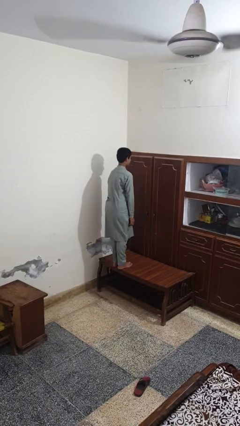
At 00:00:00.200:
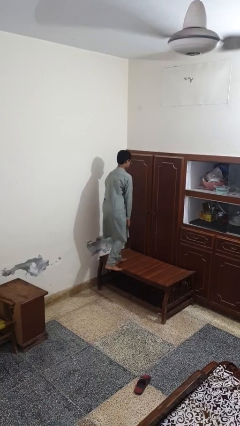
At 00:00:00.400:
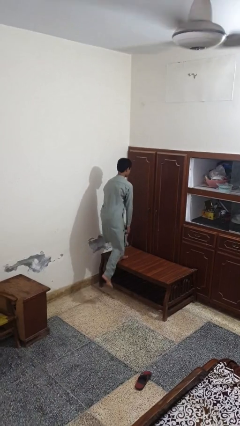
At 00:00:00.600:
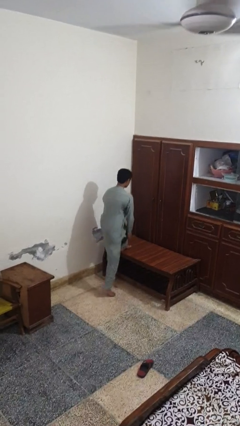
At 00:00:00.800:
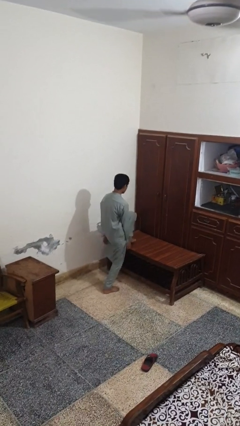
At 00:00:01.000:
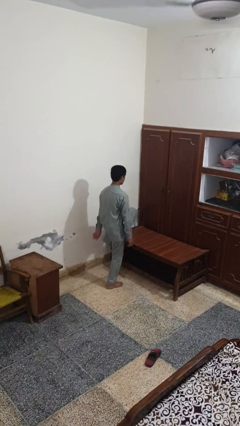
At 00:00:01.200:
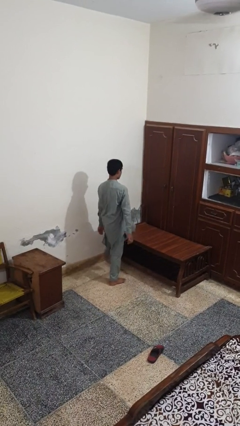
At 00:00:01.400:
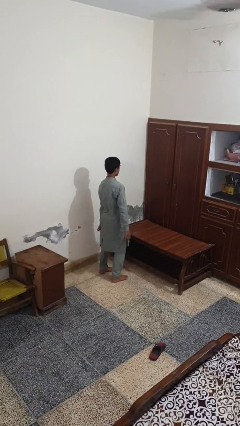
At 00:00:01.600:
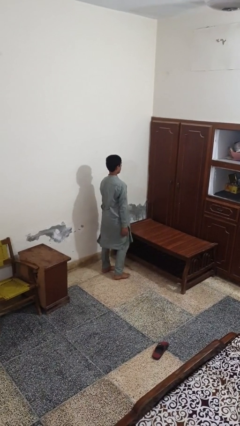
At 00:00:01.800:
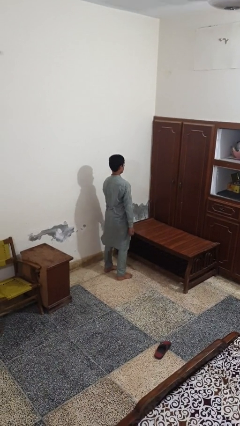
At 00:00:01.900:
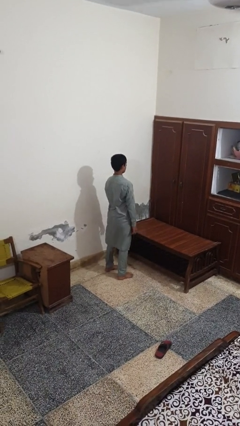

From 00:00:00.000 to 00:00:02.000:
person climbs off table

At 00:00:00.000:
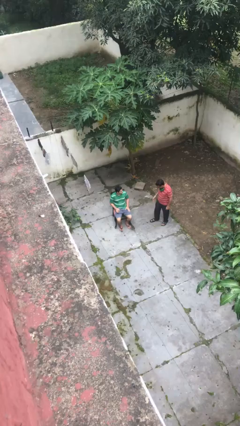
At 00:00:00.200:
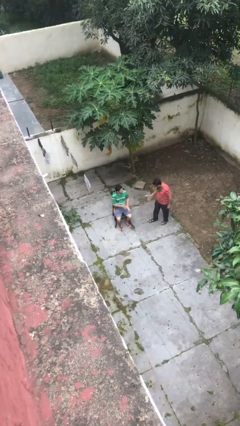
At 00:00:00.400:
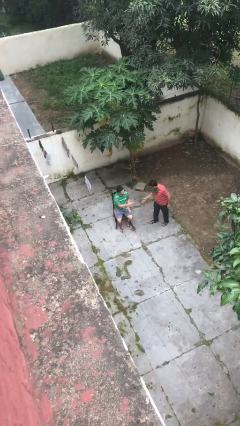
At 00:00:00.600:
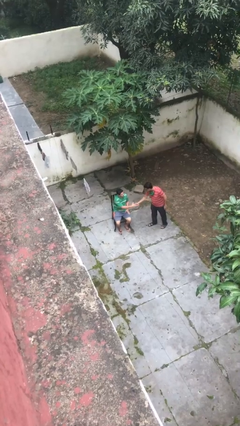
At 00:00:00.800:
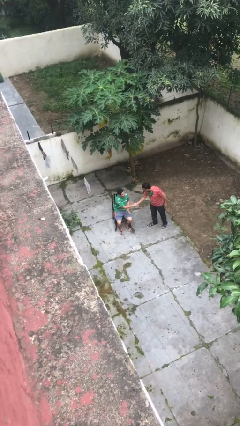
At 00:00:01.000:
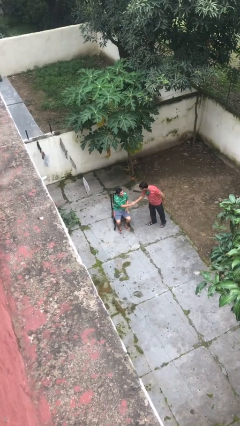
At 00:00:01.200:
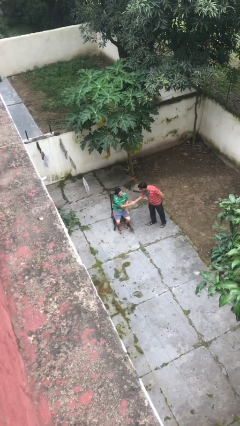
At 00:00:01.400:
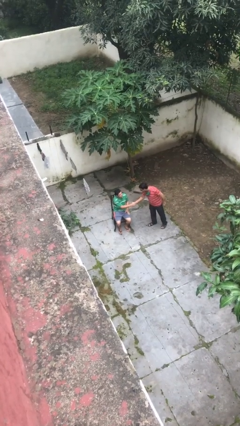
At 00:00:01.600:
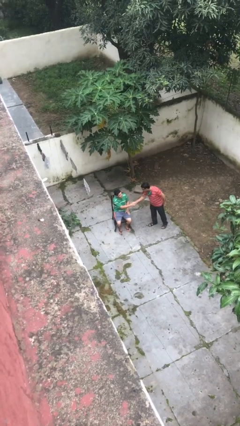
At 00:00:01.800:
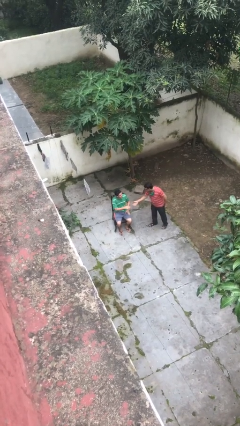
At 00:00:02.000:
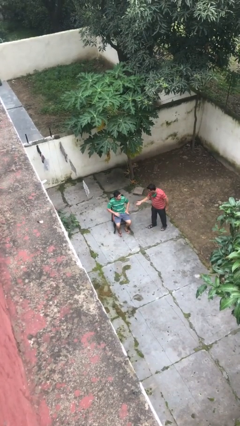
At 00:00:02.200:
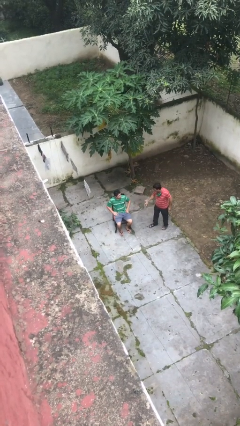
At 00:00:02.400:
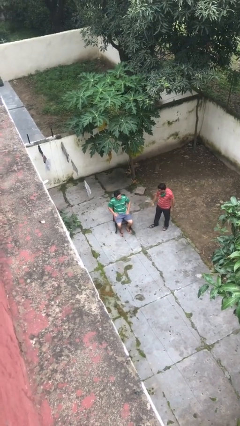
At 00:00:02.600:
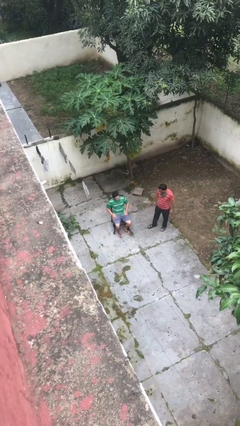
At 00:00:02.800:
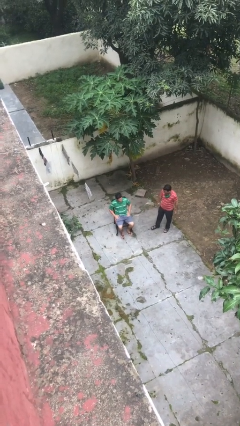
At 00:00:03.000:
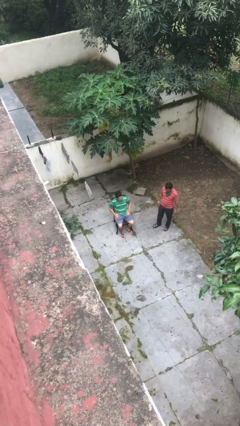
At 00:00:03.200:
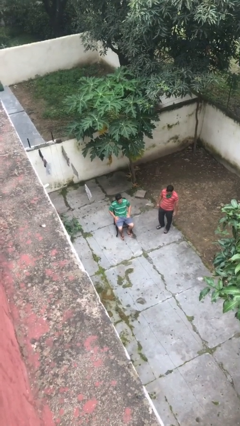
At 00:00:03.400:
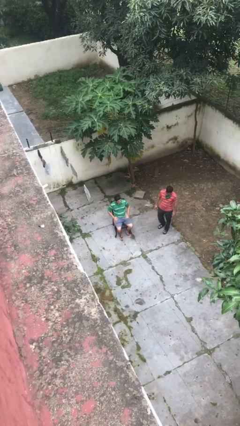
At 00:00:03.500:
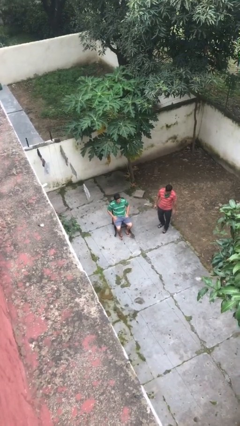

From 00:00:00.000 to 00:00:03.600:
person shakes hand

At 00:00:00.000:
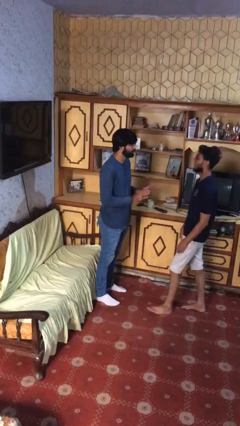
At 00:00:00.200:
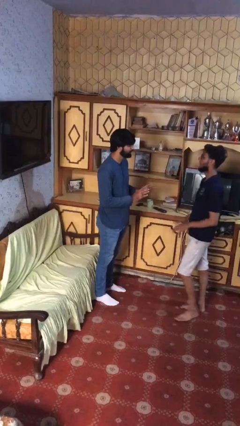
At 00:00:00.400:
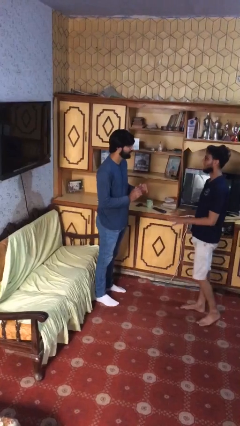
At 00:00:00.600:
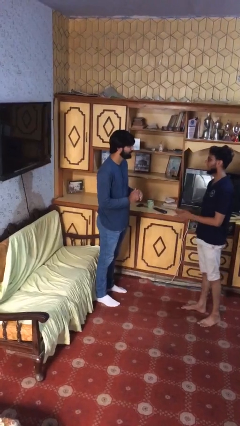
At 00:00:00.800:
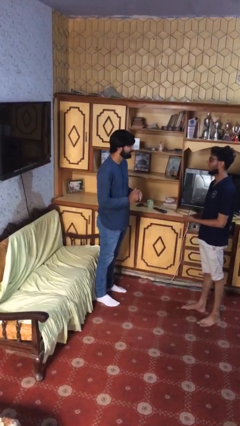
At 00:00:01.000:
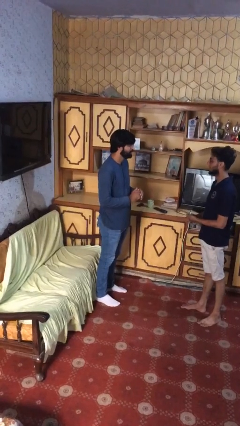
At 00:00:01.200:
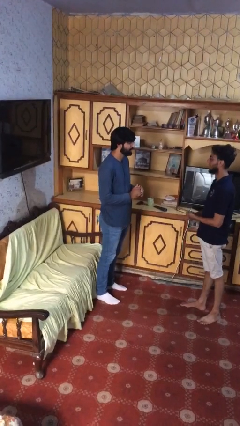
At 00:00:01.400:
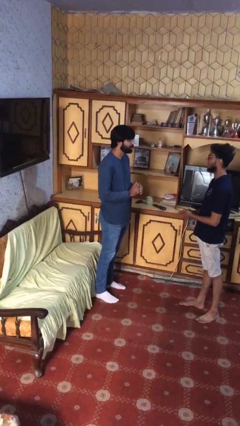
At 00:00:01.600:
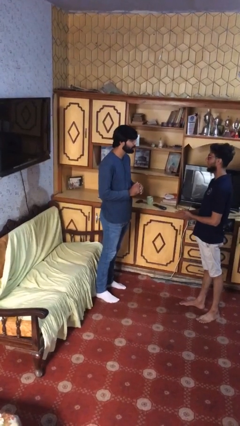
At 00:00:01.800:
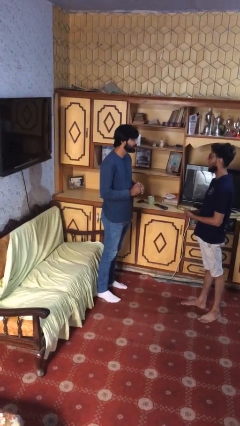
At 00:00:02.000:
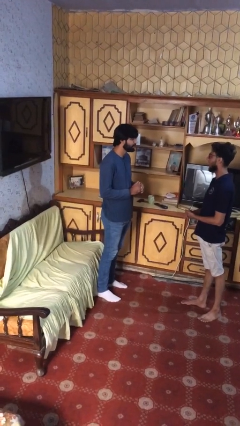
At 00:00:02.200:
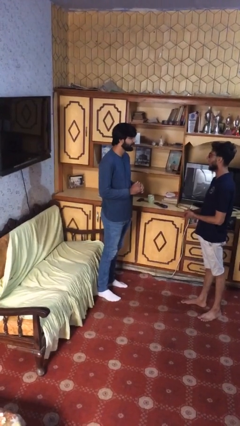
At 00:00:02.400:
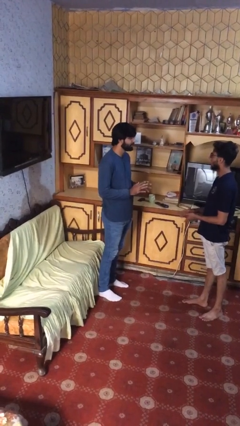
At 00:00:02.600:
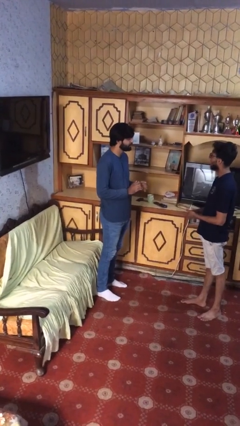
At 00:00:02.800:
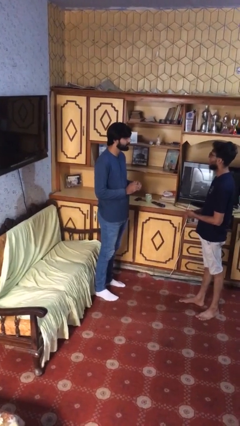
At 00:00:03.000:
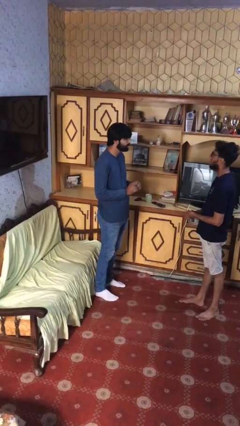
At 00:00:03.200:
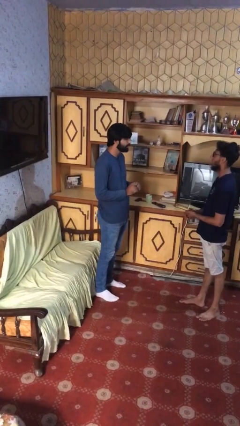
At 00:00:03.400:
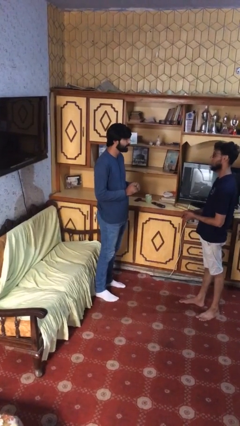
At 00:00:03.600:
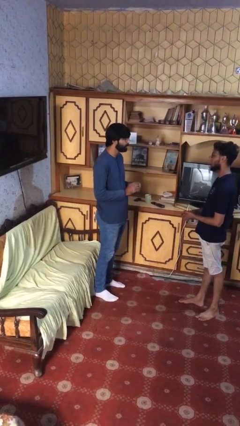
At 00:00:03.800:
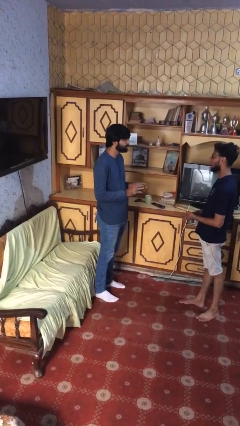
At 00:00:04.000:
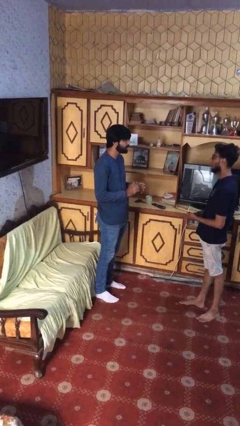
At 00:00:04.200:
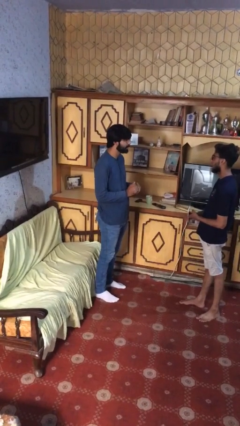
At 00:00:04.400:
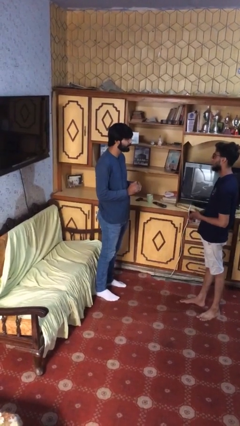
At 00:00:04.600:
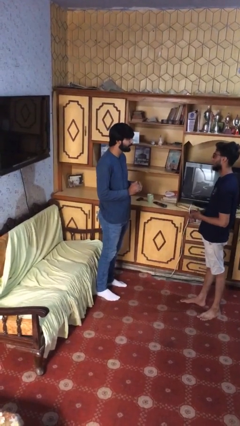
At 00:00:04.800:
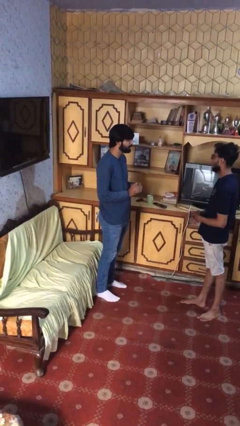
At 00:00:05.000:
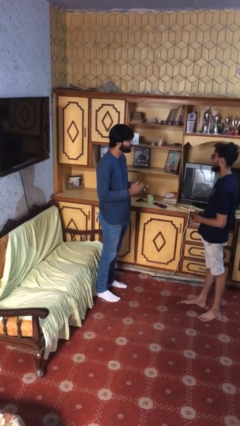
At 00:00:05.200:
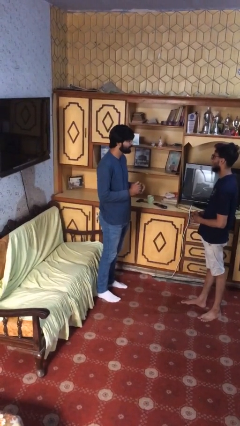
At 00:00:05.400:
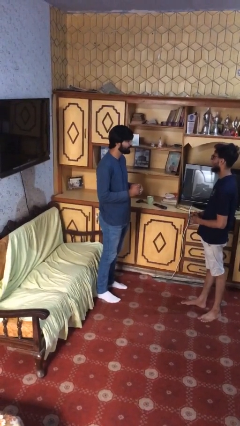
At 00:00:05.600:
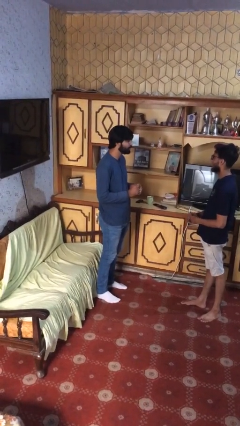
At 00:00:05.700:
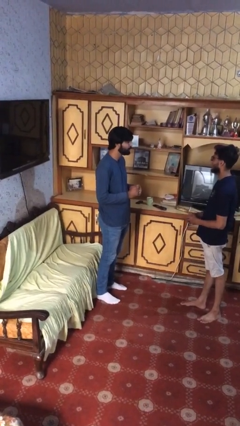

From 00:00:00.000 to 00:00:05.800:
person talks to person

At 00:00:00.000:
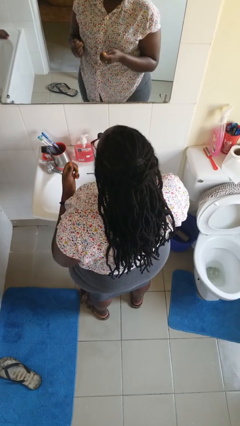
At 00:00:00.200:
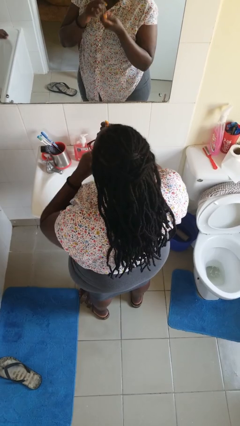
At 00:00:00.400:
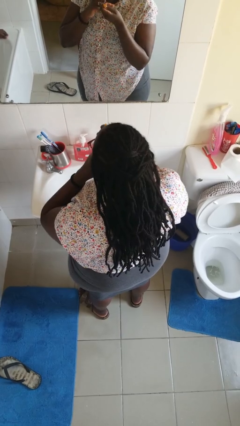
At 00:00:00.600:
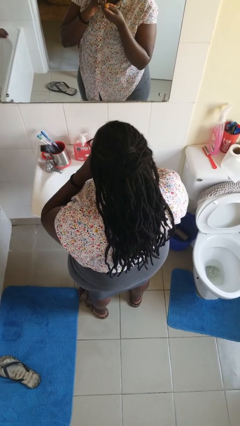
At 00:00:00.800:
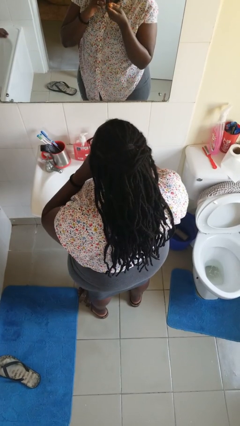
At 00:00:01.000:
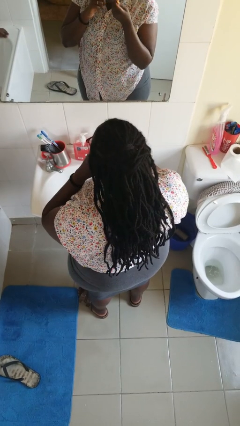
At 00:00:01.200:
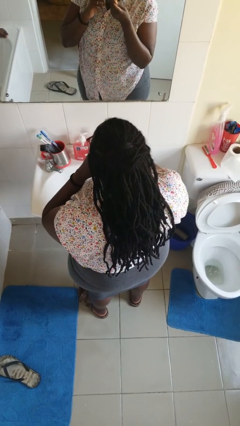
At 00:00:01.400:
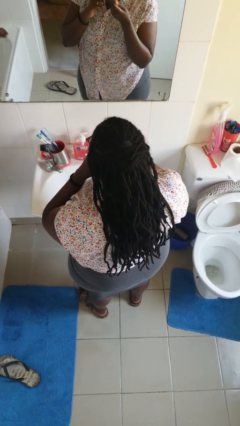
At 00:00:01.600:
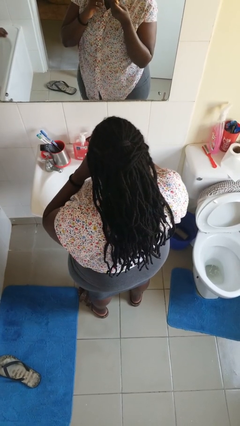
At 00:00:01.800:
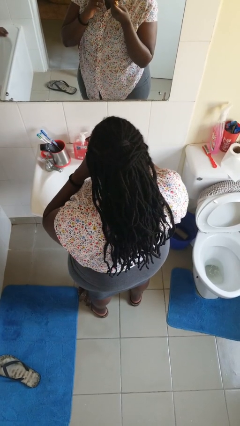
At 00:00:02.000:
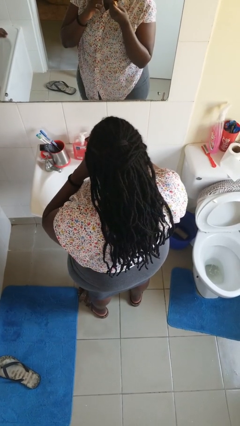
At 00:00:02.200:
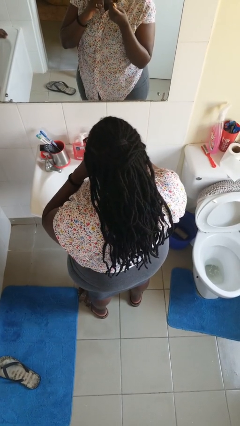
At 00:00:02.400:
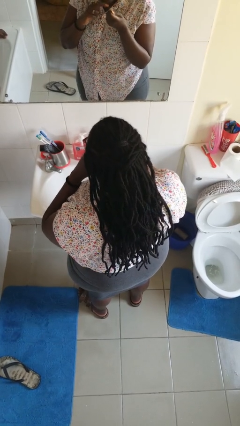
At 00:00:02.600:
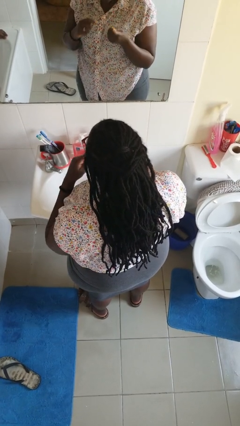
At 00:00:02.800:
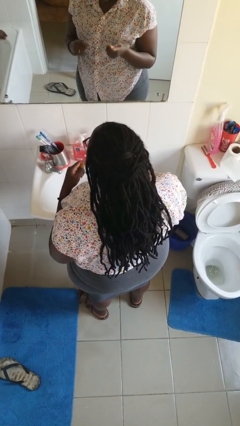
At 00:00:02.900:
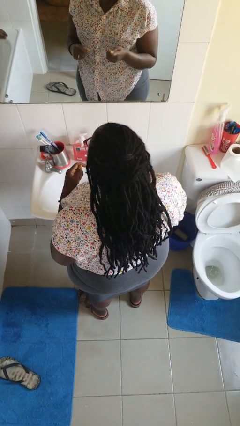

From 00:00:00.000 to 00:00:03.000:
person flosses

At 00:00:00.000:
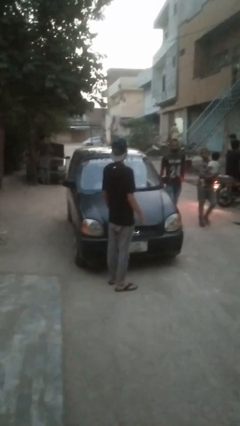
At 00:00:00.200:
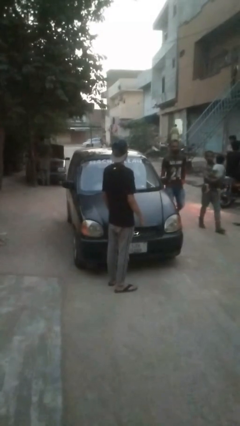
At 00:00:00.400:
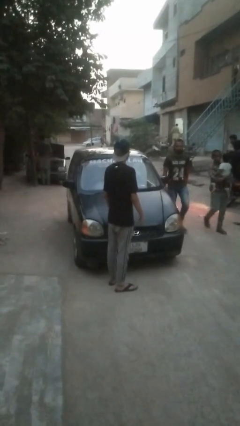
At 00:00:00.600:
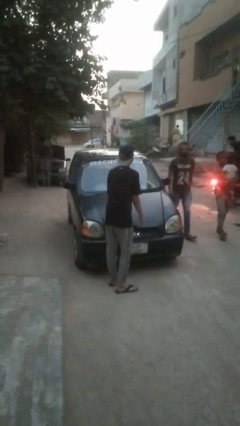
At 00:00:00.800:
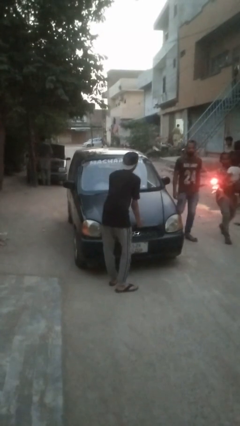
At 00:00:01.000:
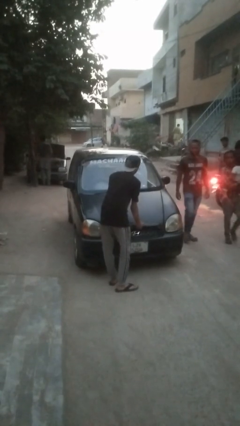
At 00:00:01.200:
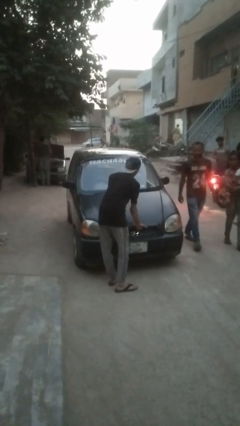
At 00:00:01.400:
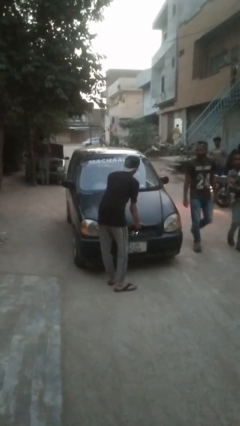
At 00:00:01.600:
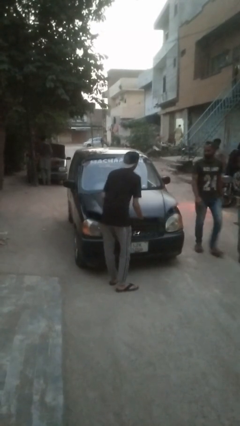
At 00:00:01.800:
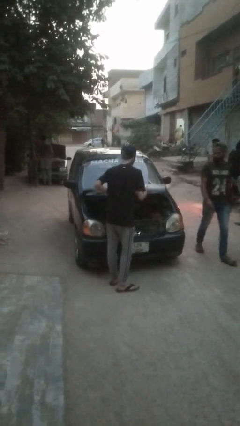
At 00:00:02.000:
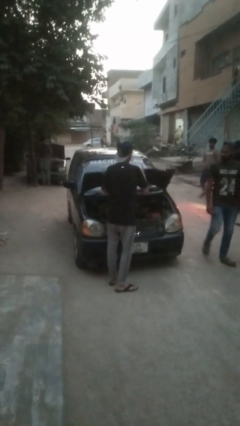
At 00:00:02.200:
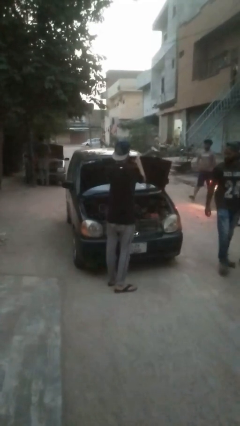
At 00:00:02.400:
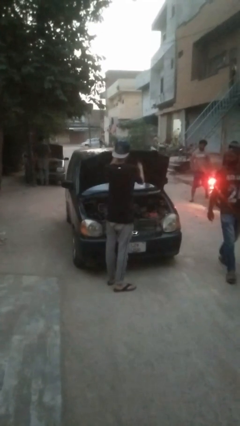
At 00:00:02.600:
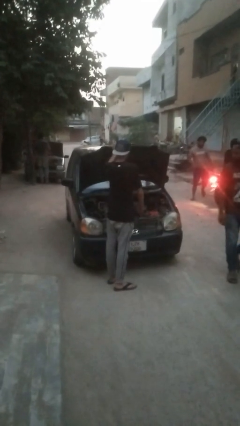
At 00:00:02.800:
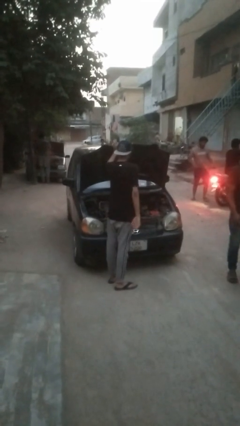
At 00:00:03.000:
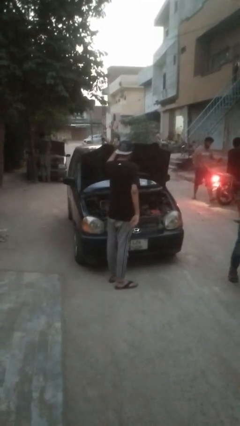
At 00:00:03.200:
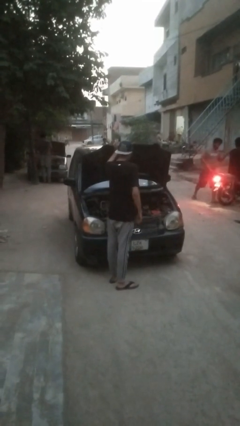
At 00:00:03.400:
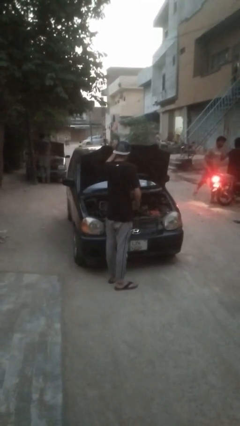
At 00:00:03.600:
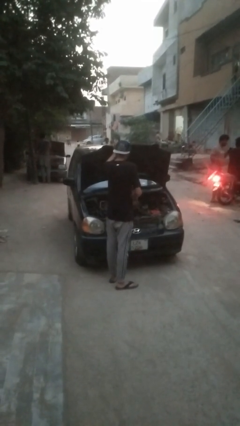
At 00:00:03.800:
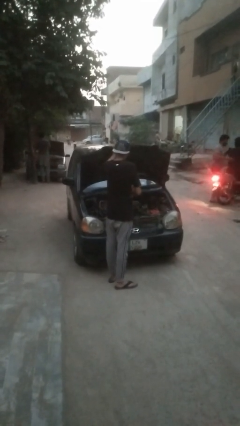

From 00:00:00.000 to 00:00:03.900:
person opens car hood
